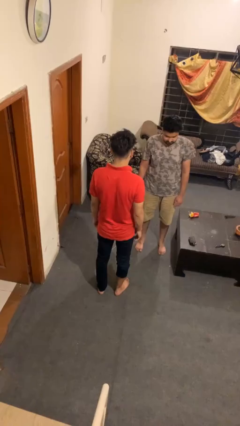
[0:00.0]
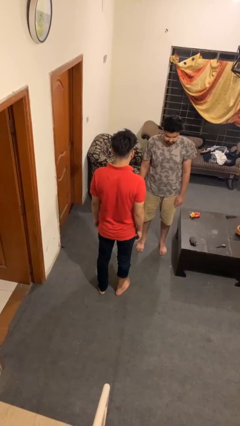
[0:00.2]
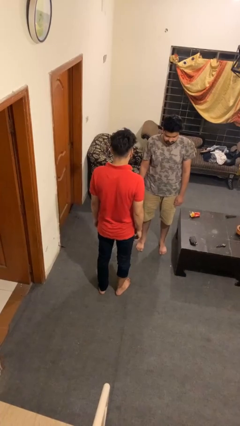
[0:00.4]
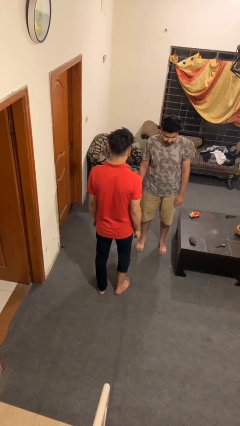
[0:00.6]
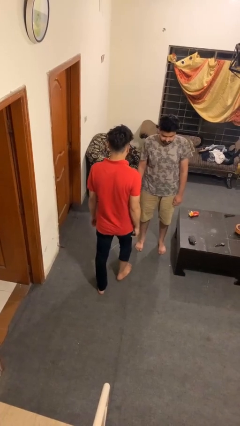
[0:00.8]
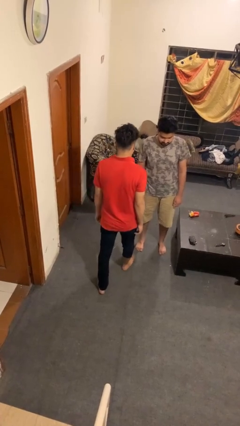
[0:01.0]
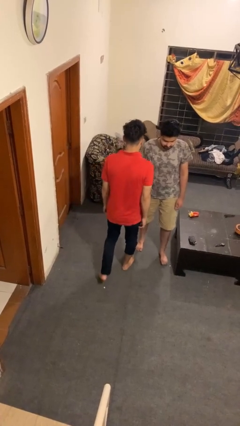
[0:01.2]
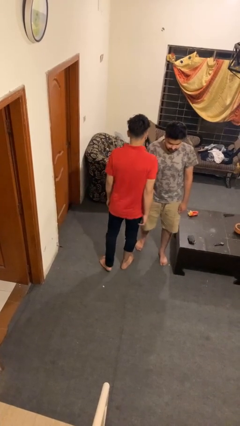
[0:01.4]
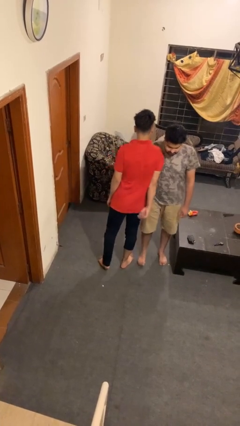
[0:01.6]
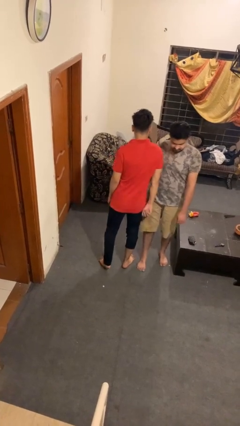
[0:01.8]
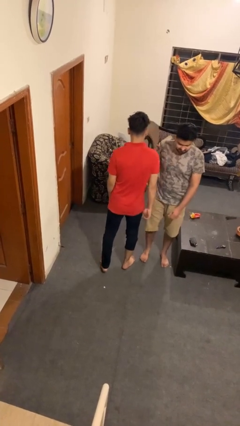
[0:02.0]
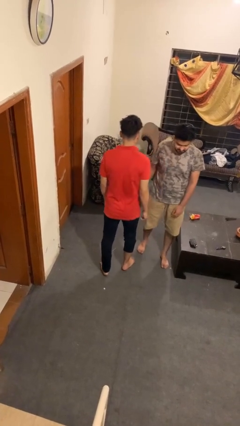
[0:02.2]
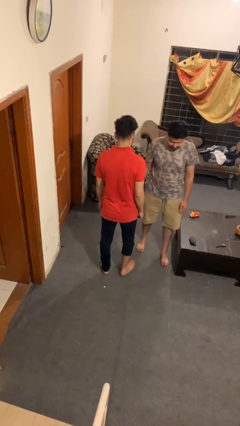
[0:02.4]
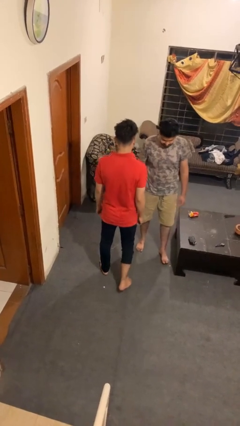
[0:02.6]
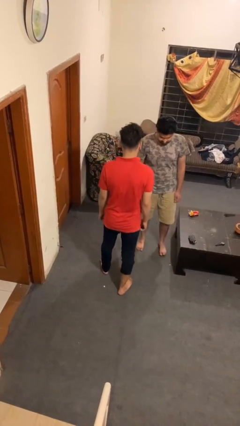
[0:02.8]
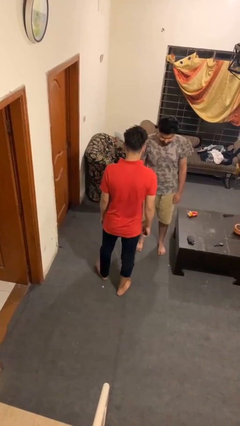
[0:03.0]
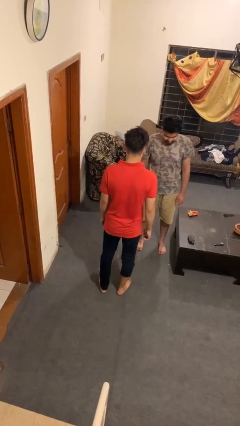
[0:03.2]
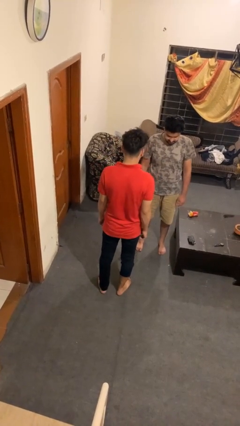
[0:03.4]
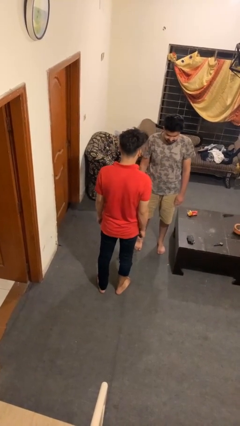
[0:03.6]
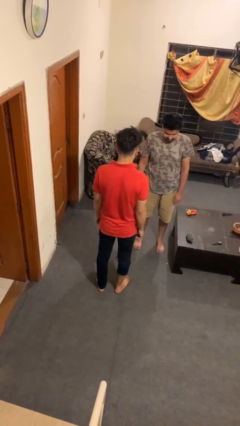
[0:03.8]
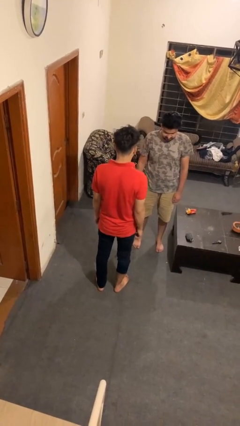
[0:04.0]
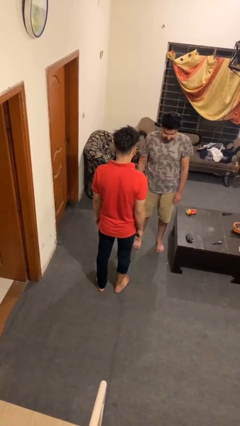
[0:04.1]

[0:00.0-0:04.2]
person bumps into person

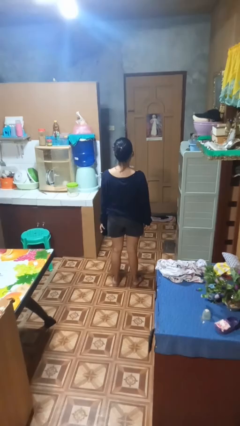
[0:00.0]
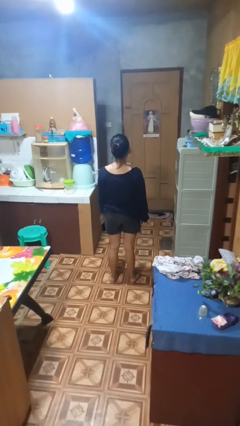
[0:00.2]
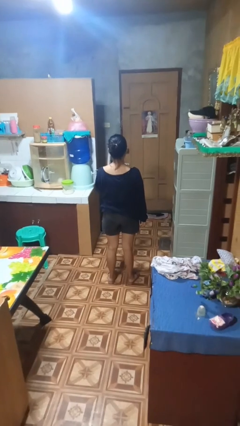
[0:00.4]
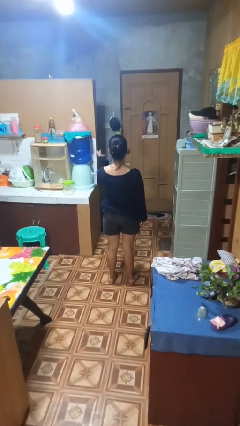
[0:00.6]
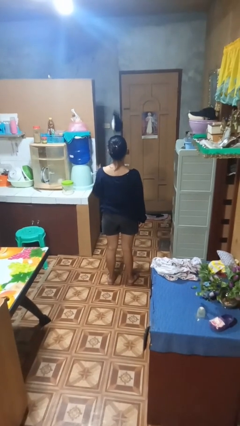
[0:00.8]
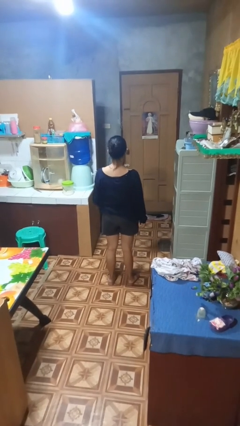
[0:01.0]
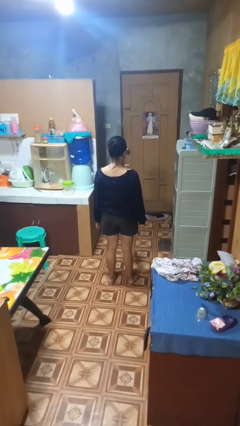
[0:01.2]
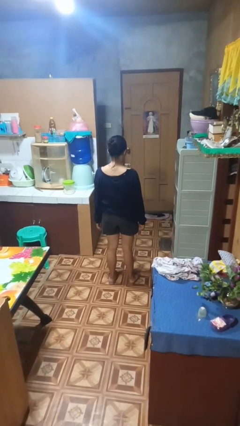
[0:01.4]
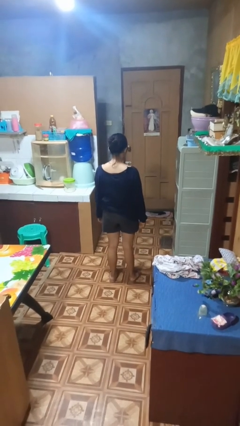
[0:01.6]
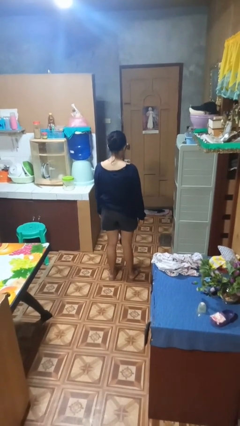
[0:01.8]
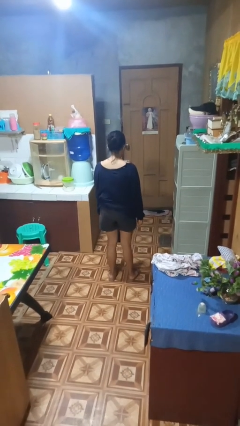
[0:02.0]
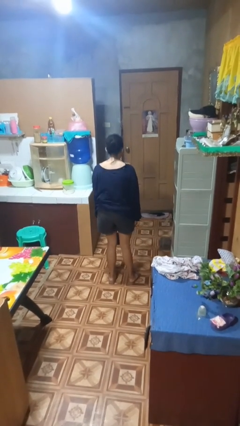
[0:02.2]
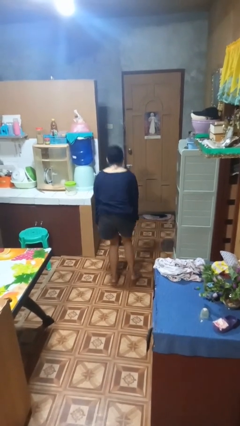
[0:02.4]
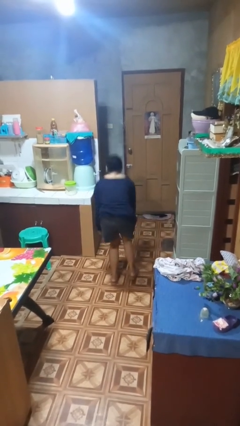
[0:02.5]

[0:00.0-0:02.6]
person throws object into air

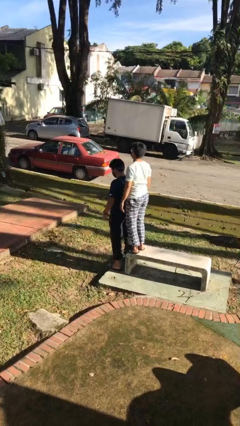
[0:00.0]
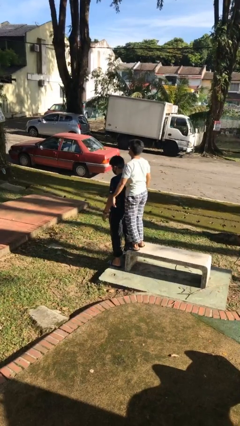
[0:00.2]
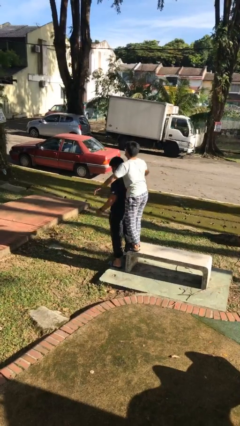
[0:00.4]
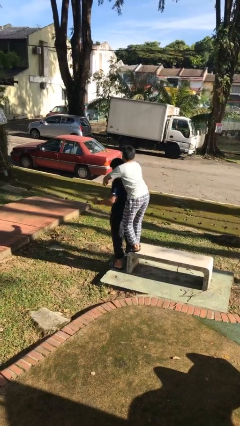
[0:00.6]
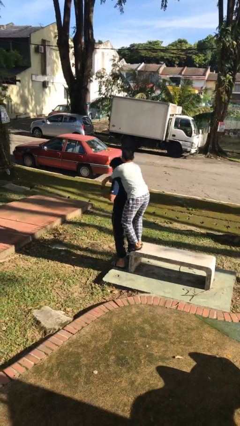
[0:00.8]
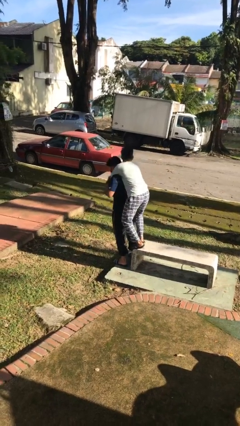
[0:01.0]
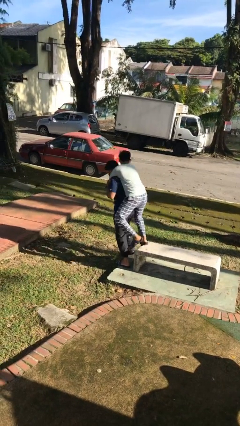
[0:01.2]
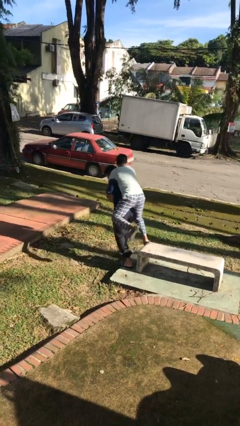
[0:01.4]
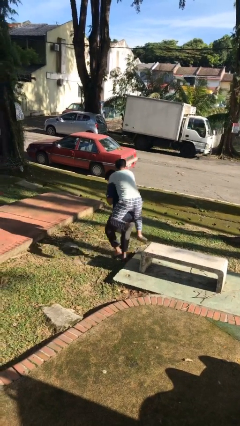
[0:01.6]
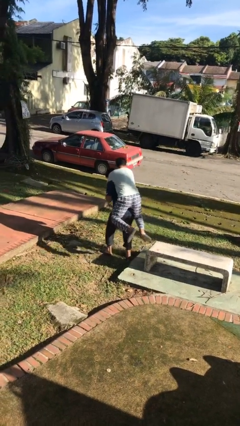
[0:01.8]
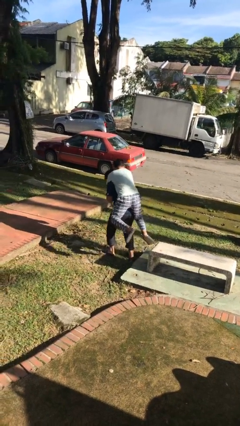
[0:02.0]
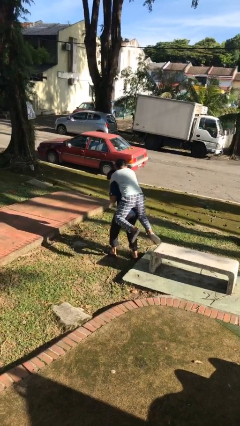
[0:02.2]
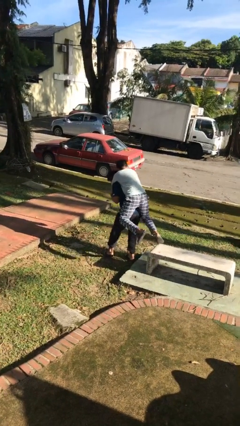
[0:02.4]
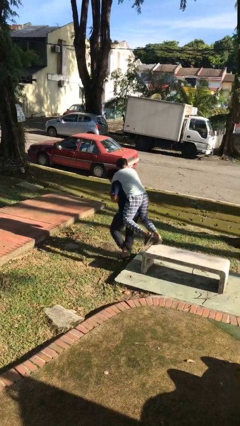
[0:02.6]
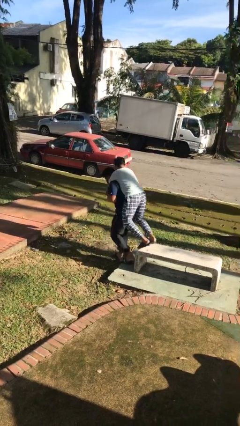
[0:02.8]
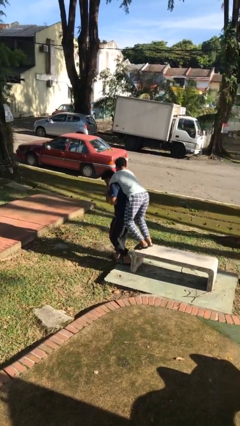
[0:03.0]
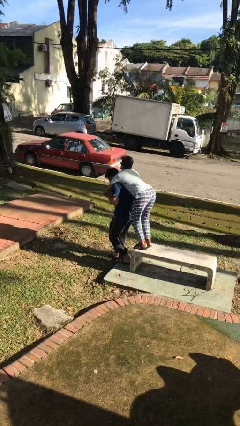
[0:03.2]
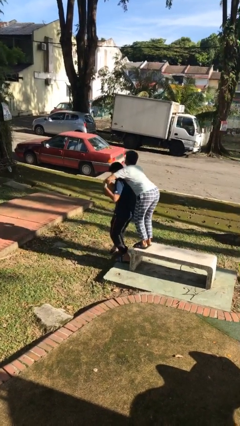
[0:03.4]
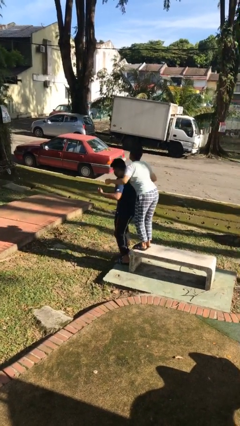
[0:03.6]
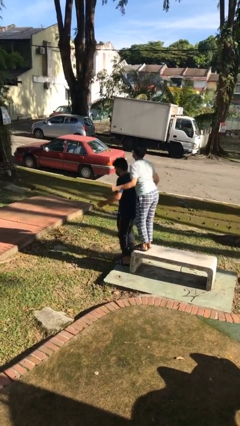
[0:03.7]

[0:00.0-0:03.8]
person carries person on back

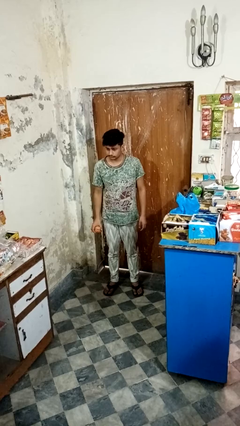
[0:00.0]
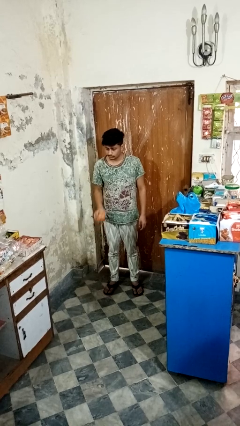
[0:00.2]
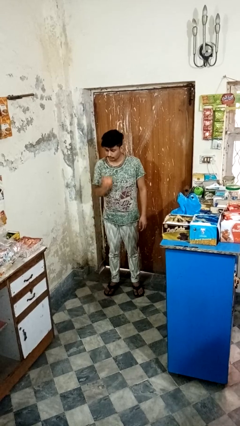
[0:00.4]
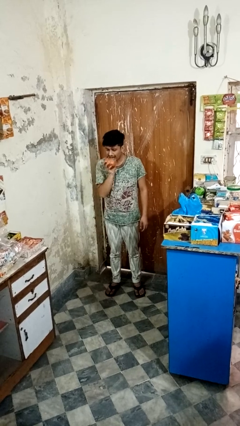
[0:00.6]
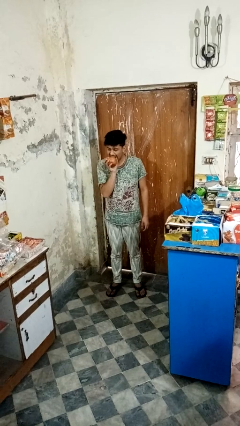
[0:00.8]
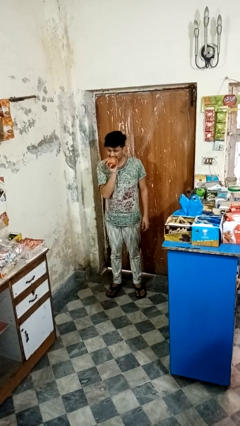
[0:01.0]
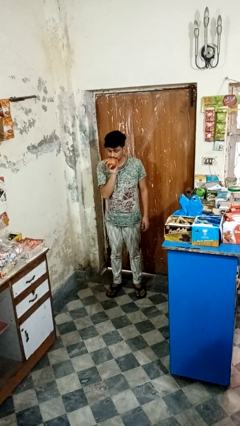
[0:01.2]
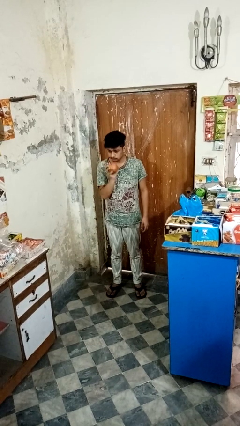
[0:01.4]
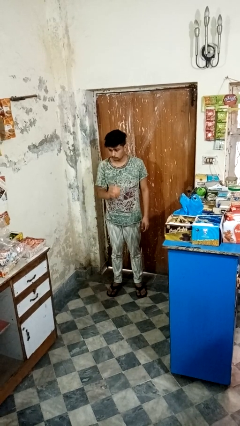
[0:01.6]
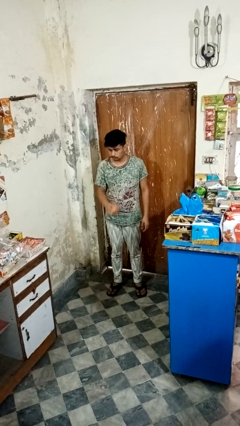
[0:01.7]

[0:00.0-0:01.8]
person eats apple

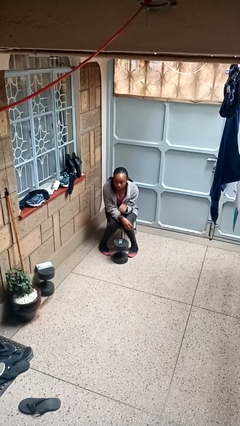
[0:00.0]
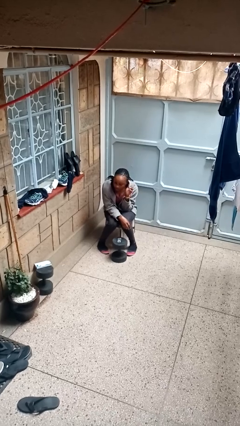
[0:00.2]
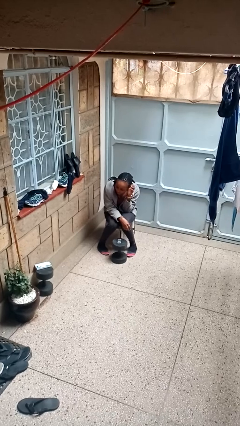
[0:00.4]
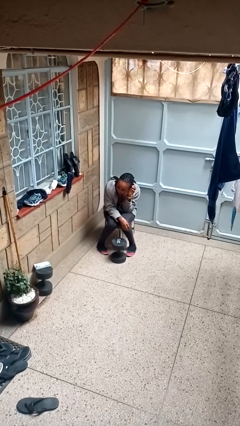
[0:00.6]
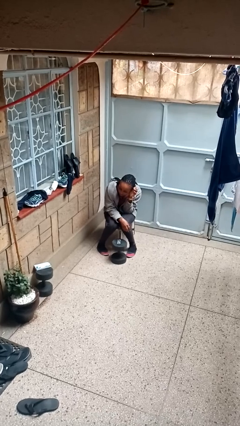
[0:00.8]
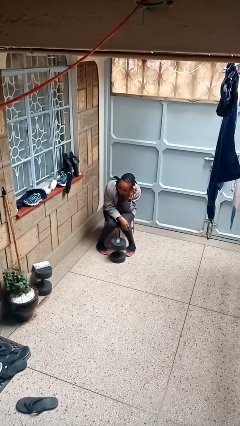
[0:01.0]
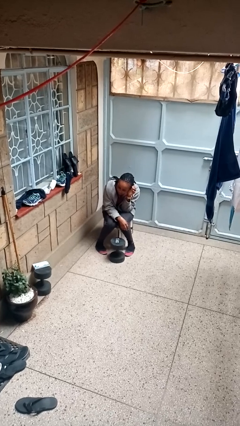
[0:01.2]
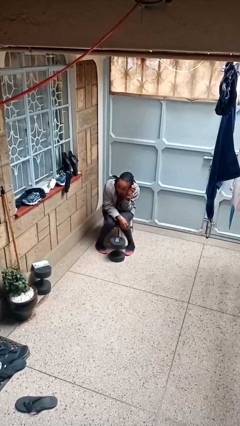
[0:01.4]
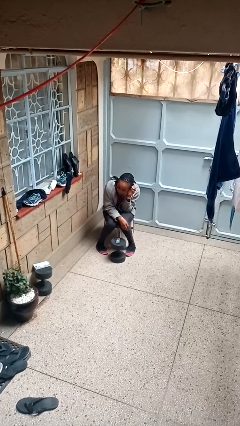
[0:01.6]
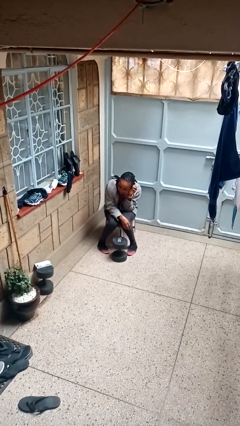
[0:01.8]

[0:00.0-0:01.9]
person gestures listen closely

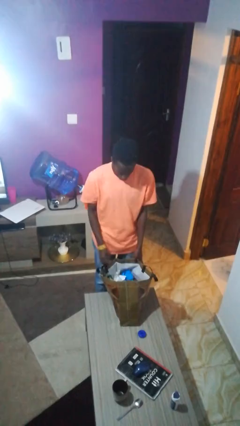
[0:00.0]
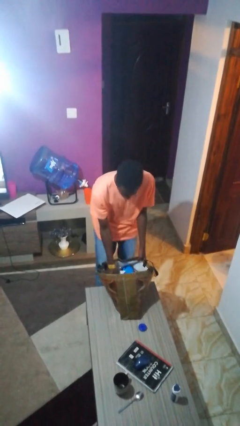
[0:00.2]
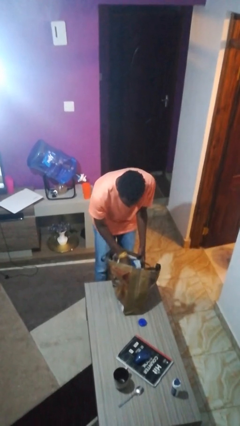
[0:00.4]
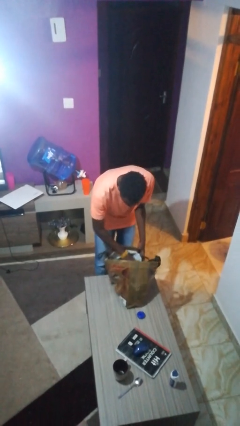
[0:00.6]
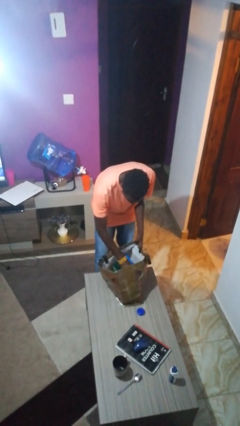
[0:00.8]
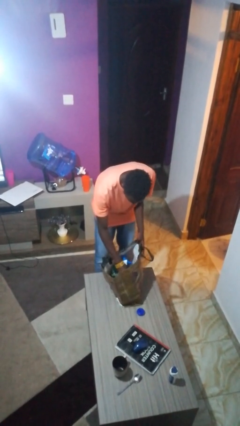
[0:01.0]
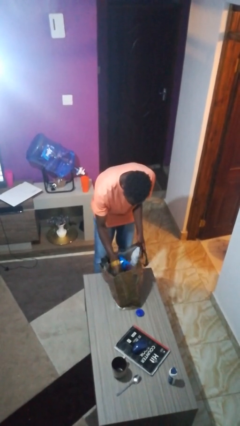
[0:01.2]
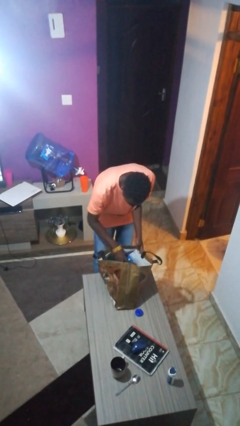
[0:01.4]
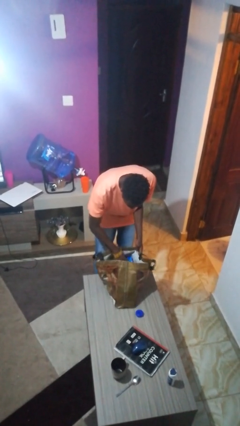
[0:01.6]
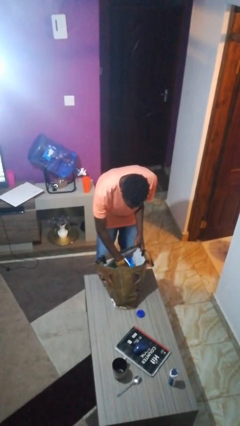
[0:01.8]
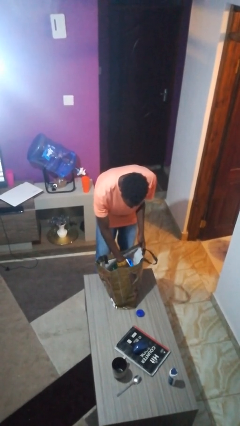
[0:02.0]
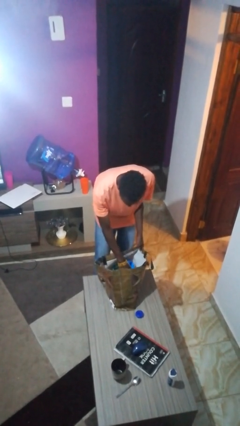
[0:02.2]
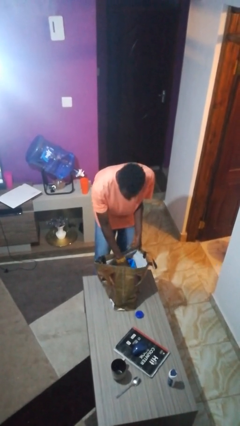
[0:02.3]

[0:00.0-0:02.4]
person searches in bag

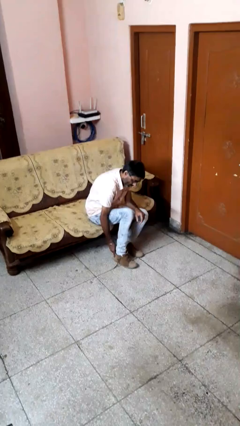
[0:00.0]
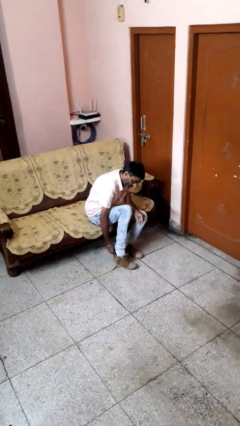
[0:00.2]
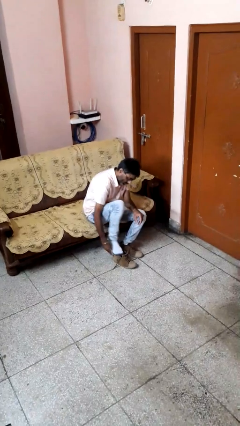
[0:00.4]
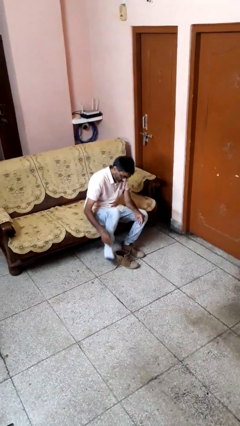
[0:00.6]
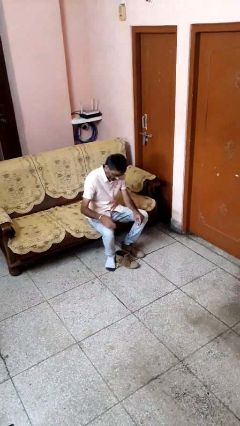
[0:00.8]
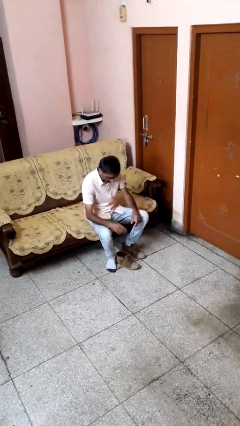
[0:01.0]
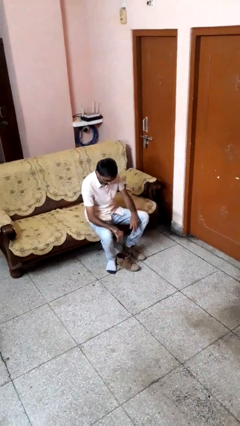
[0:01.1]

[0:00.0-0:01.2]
person takes off shoes
